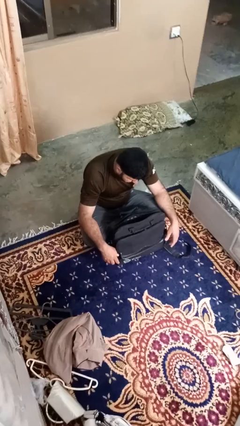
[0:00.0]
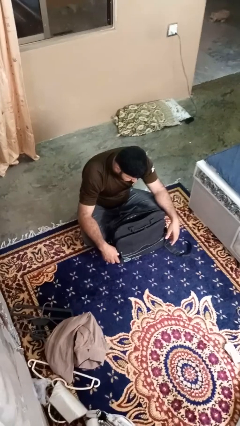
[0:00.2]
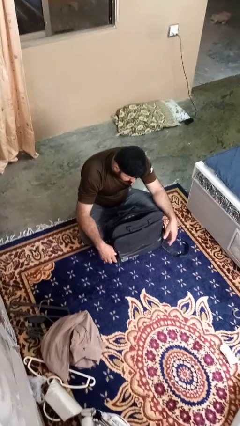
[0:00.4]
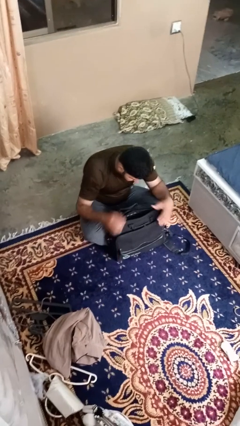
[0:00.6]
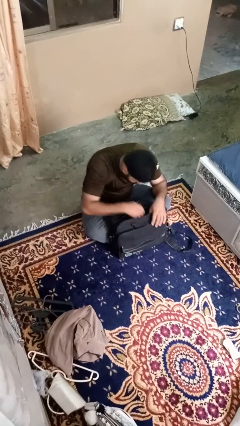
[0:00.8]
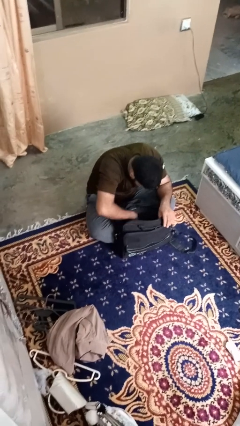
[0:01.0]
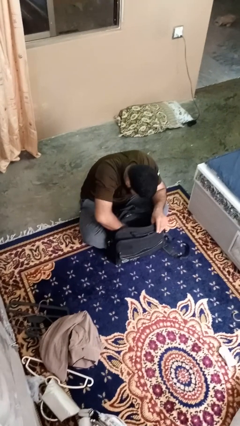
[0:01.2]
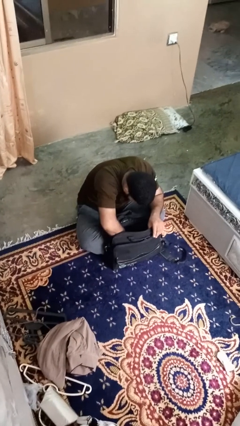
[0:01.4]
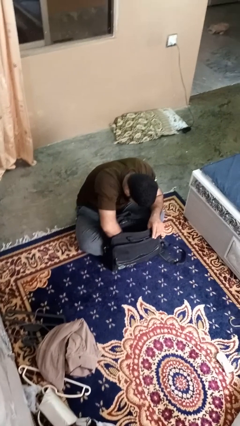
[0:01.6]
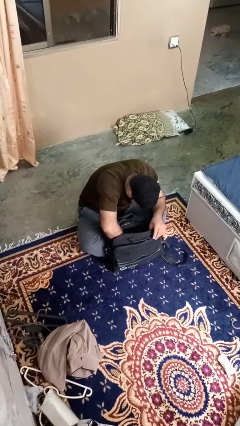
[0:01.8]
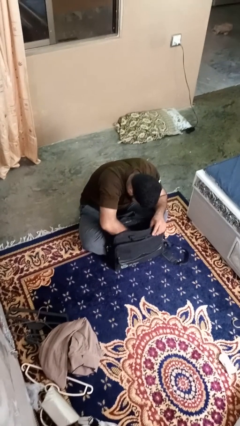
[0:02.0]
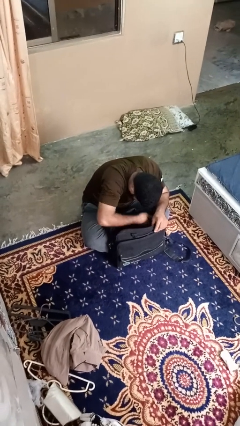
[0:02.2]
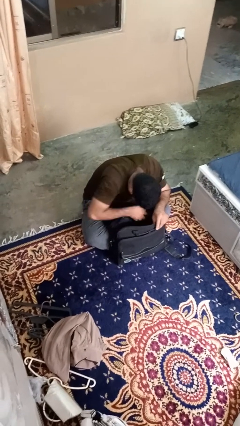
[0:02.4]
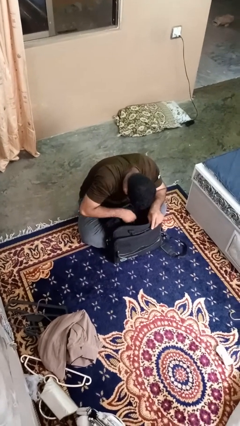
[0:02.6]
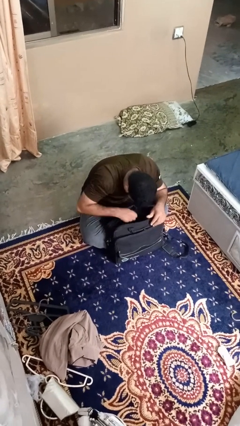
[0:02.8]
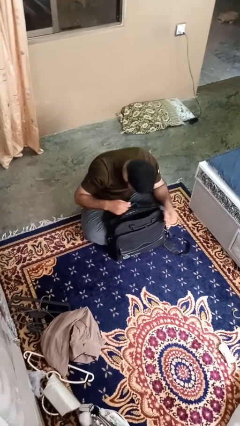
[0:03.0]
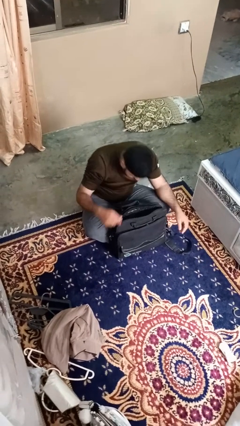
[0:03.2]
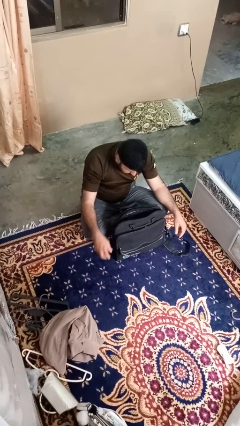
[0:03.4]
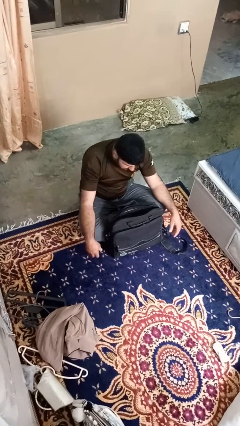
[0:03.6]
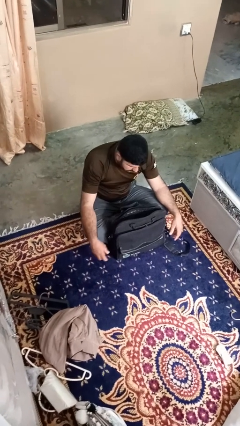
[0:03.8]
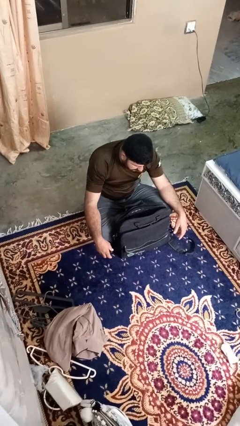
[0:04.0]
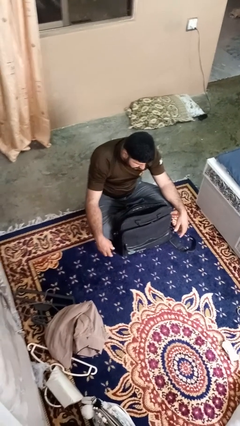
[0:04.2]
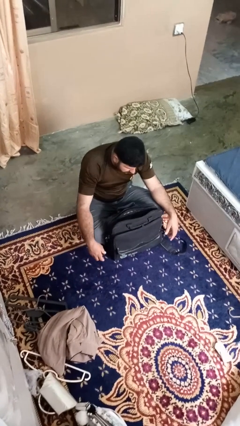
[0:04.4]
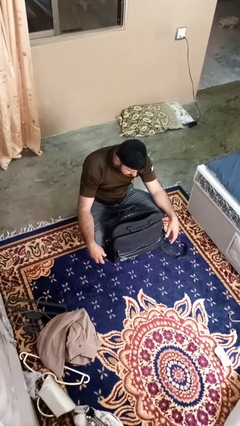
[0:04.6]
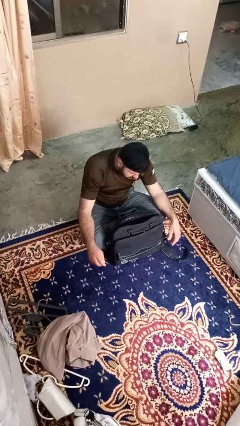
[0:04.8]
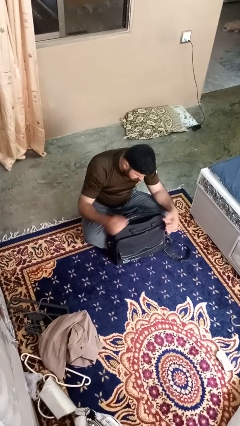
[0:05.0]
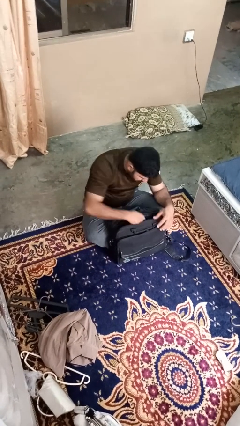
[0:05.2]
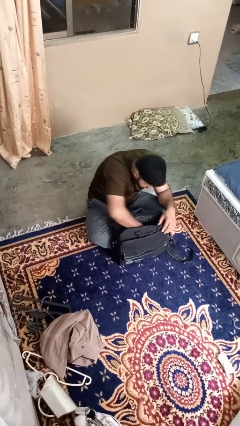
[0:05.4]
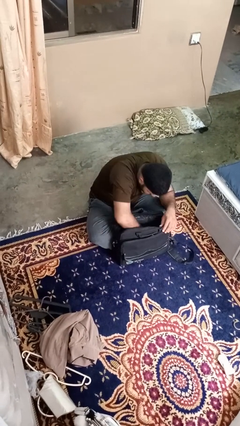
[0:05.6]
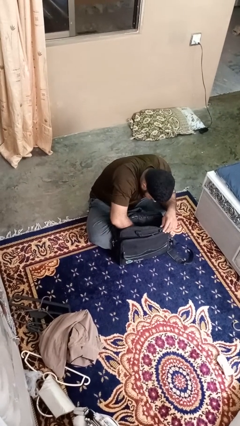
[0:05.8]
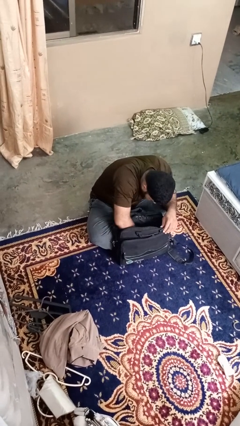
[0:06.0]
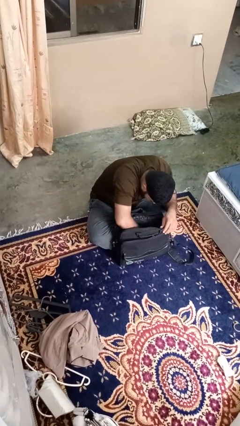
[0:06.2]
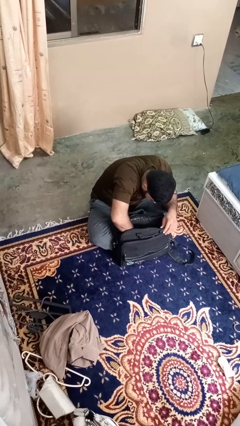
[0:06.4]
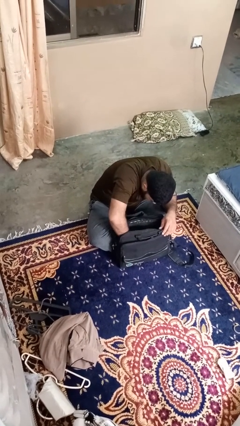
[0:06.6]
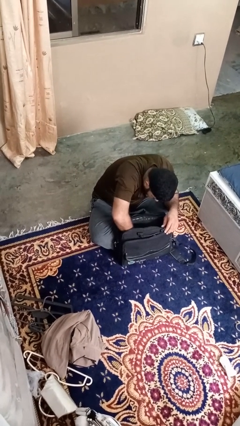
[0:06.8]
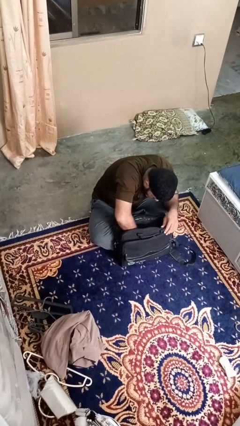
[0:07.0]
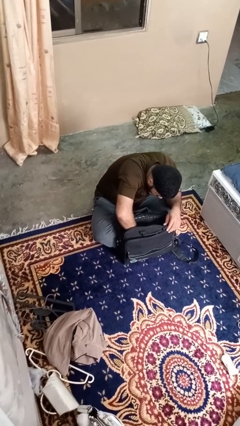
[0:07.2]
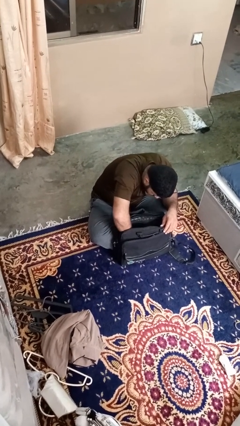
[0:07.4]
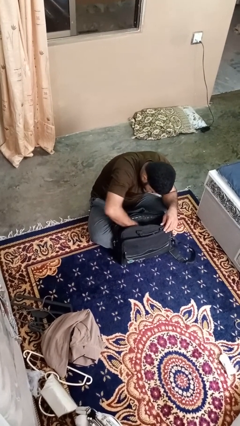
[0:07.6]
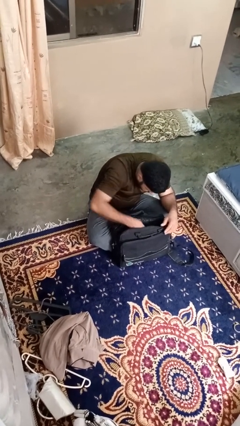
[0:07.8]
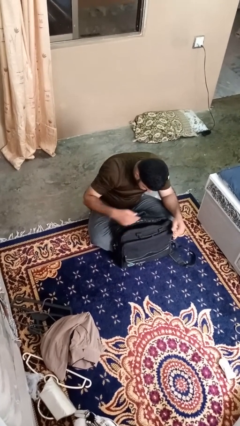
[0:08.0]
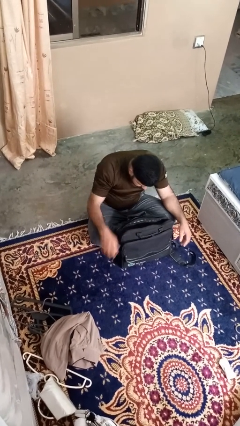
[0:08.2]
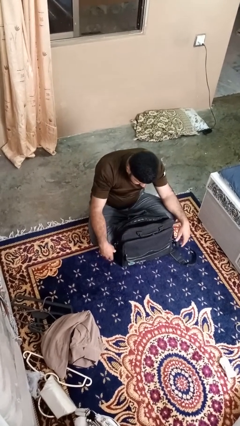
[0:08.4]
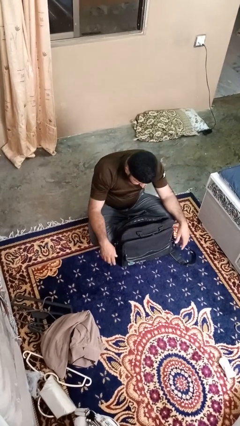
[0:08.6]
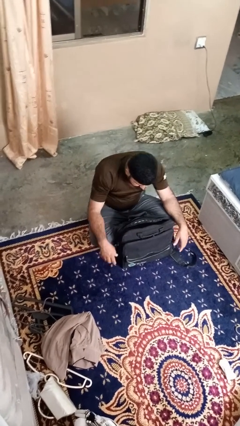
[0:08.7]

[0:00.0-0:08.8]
person searches in bag

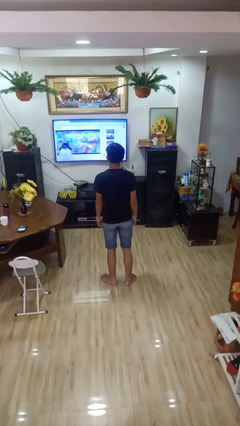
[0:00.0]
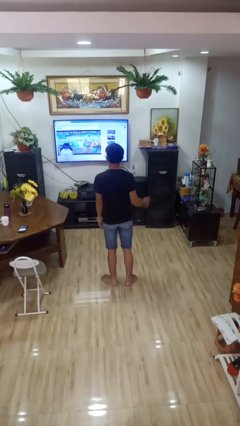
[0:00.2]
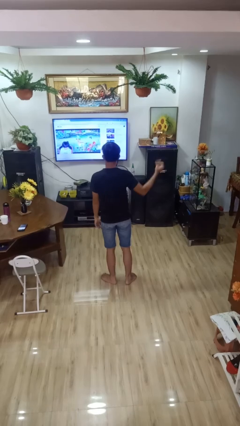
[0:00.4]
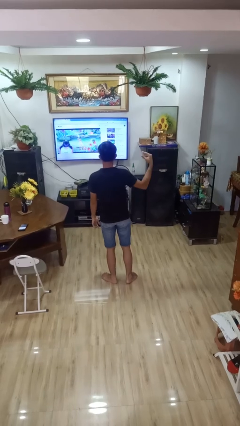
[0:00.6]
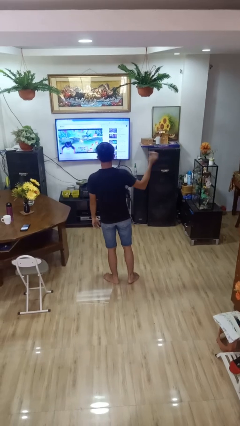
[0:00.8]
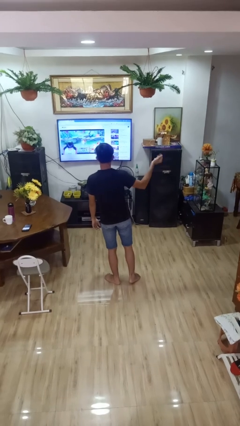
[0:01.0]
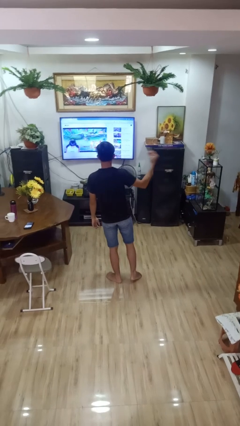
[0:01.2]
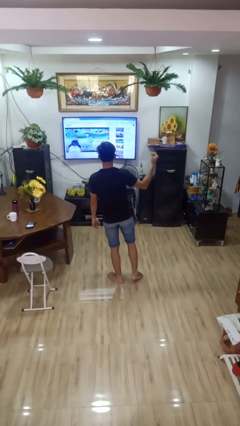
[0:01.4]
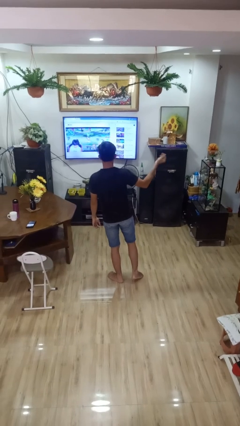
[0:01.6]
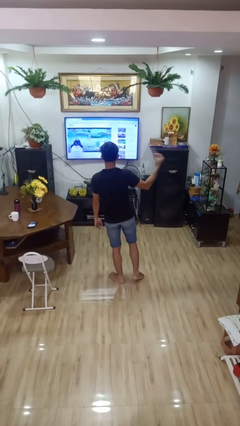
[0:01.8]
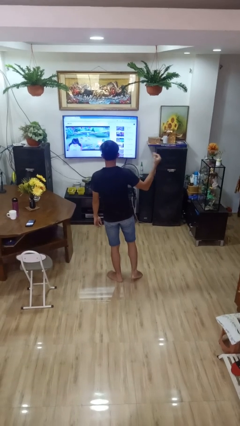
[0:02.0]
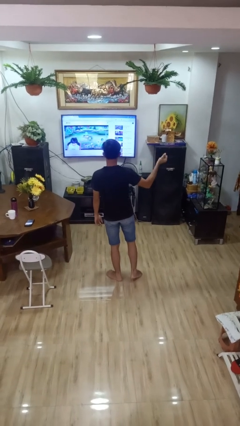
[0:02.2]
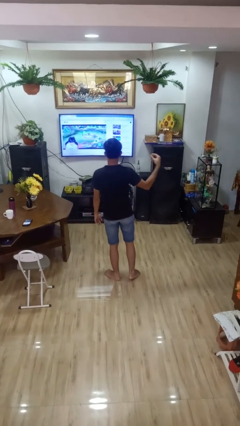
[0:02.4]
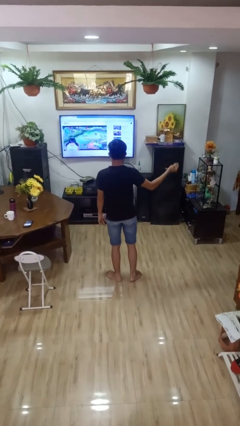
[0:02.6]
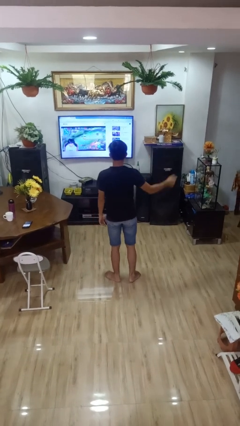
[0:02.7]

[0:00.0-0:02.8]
person snaps fingers

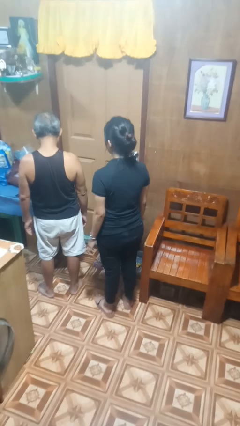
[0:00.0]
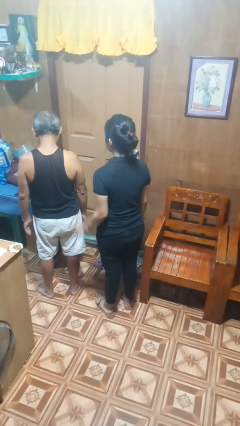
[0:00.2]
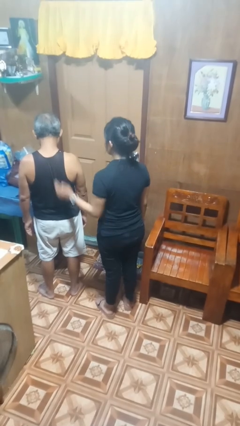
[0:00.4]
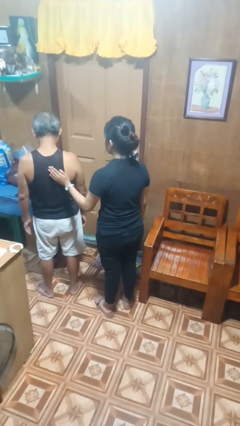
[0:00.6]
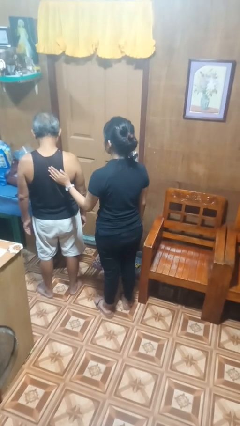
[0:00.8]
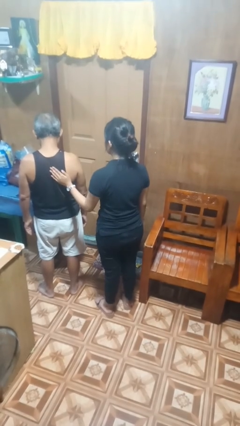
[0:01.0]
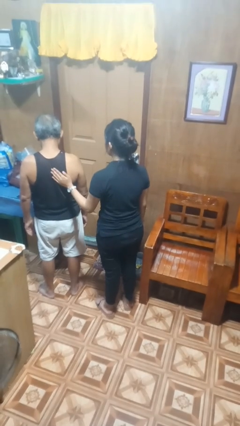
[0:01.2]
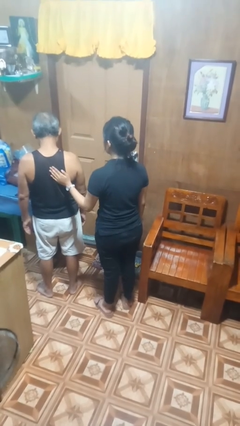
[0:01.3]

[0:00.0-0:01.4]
person touches back of person

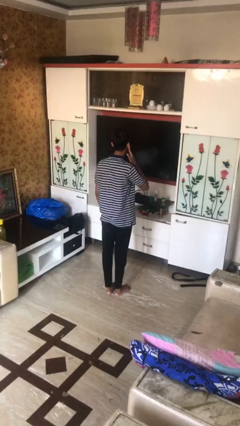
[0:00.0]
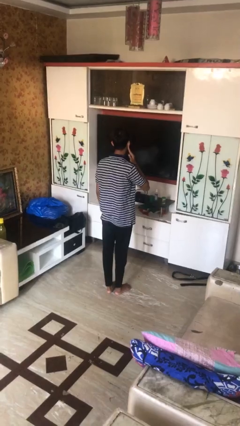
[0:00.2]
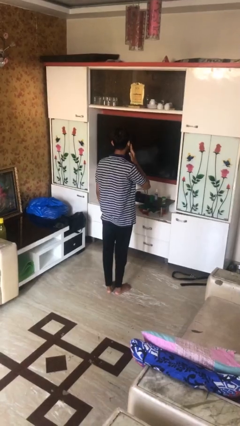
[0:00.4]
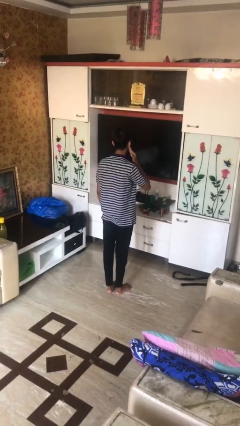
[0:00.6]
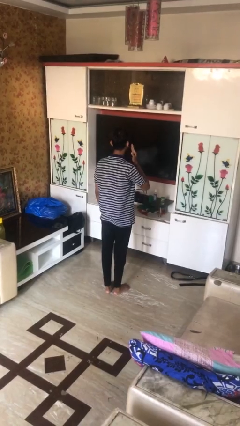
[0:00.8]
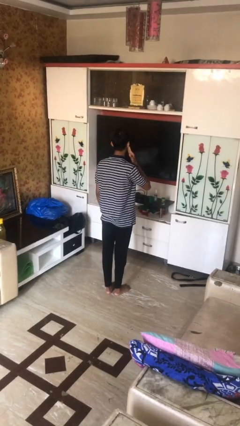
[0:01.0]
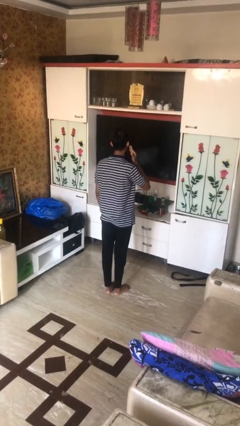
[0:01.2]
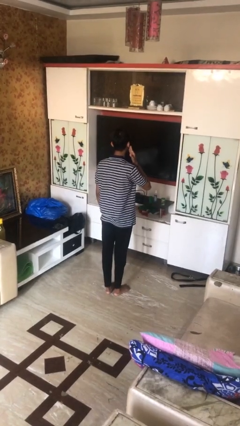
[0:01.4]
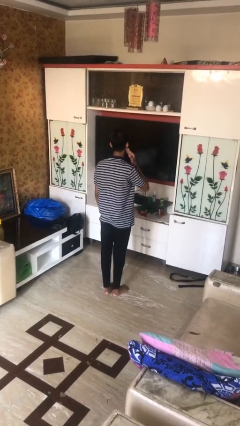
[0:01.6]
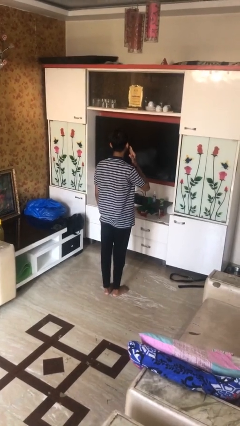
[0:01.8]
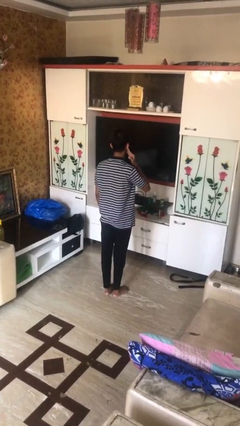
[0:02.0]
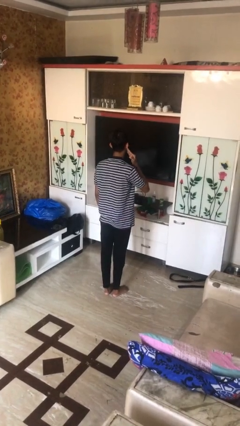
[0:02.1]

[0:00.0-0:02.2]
person touches earlobe

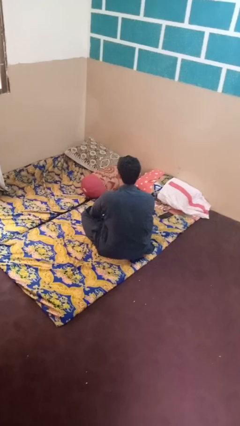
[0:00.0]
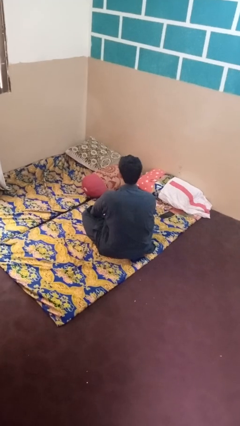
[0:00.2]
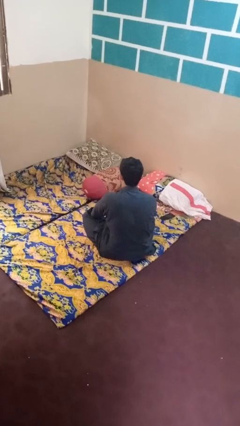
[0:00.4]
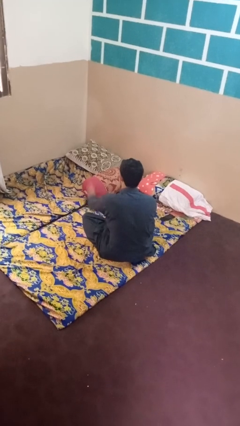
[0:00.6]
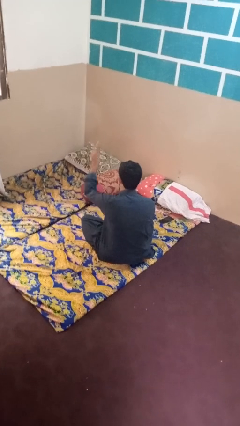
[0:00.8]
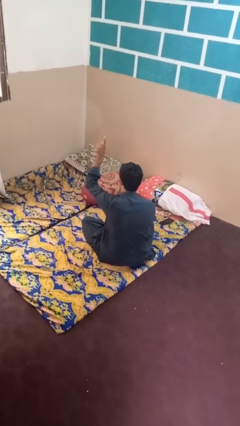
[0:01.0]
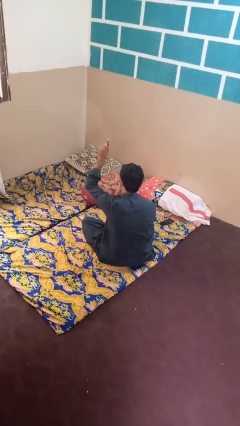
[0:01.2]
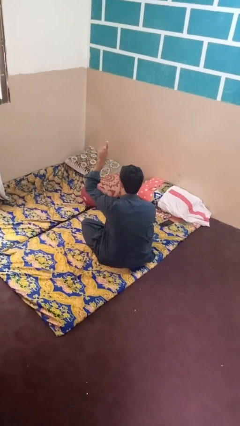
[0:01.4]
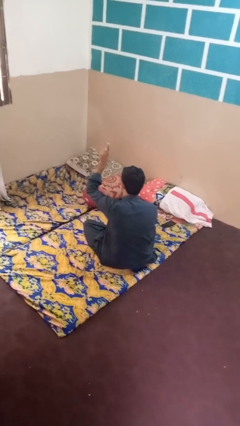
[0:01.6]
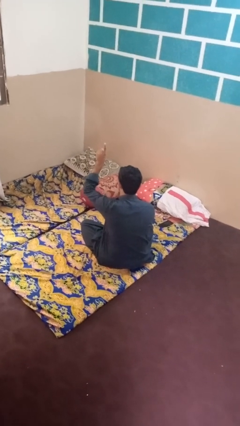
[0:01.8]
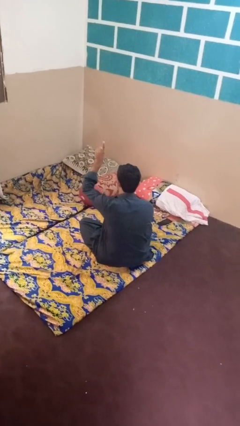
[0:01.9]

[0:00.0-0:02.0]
person gestures hang loose
